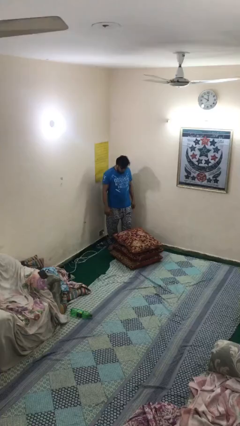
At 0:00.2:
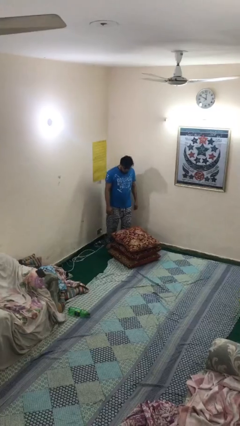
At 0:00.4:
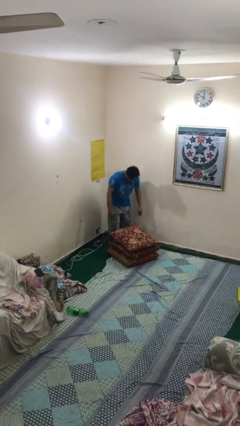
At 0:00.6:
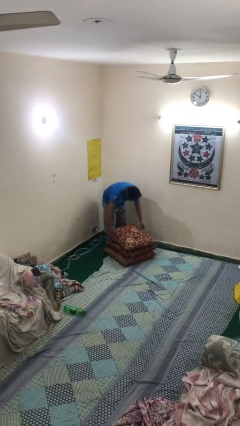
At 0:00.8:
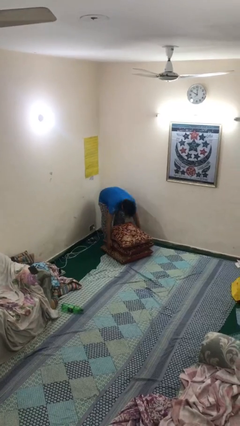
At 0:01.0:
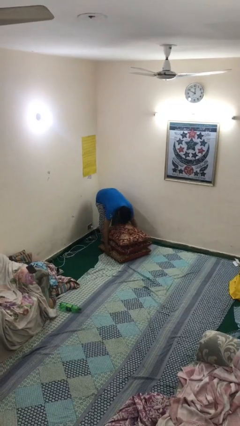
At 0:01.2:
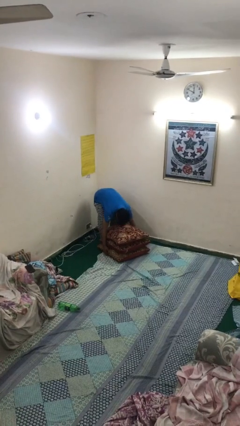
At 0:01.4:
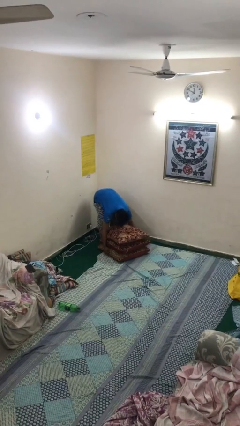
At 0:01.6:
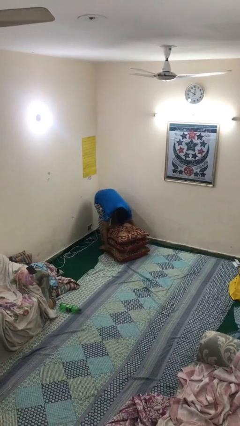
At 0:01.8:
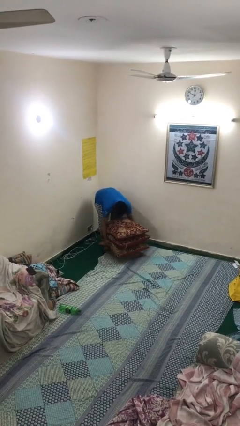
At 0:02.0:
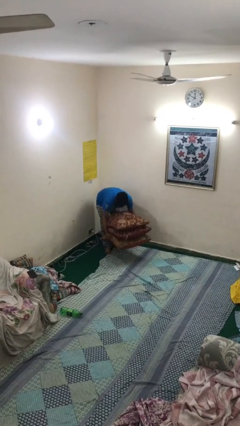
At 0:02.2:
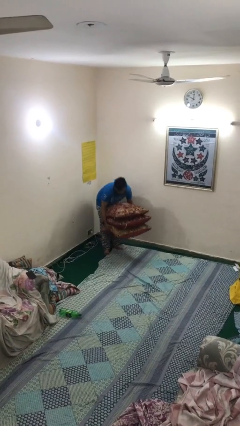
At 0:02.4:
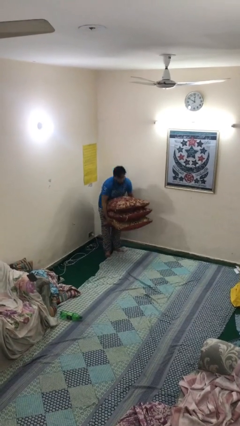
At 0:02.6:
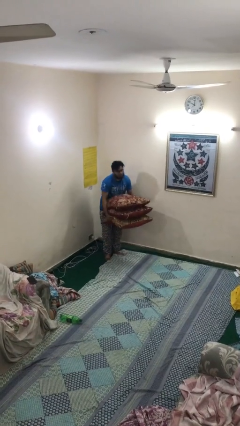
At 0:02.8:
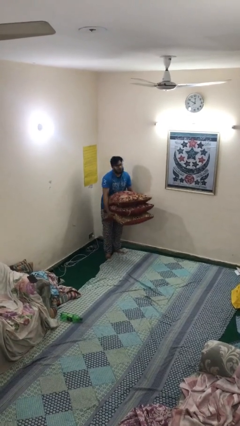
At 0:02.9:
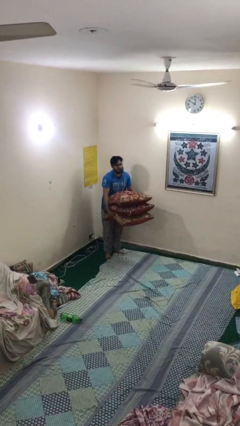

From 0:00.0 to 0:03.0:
person picks up object from floor

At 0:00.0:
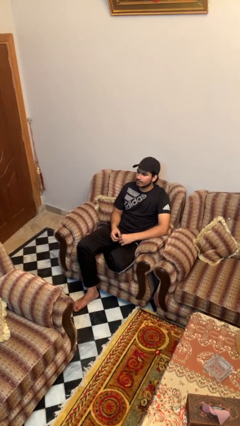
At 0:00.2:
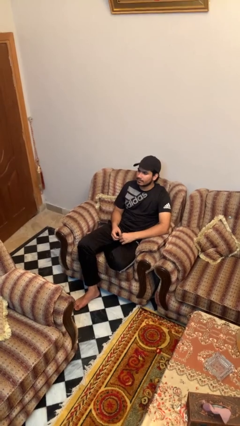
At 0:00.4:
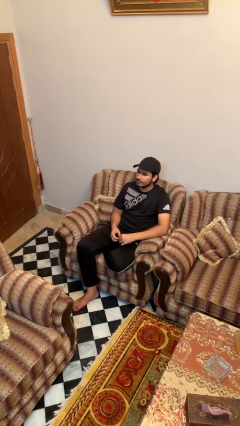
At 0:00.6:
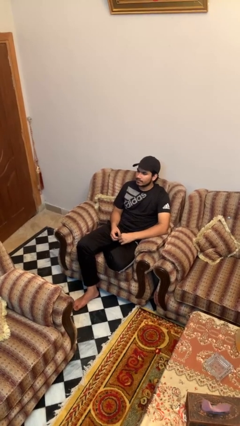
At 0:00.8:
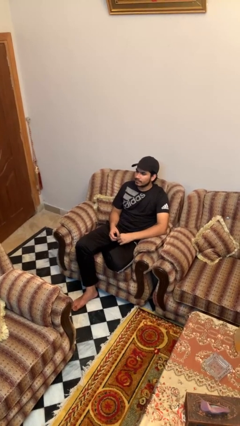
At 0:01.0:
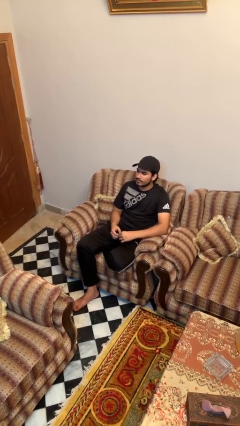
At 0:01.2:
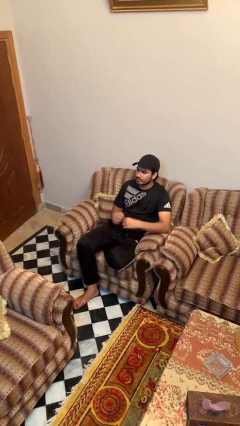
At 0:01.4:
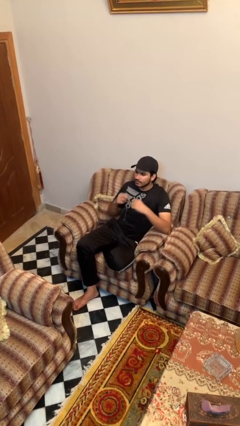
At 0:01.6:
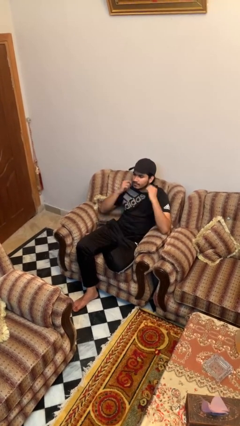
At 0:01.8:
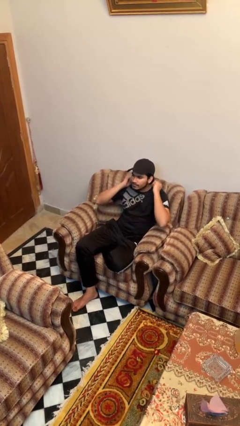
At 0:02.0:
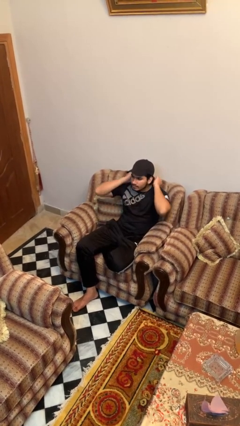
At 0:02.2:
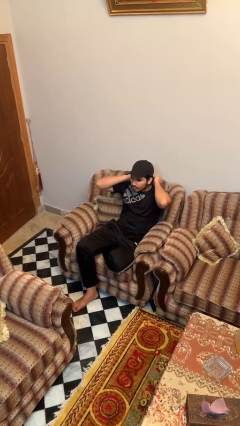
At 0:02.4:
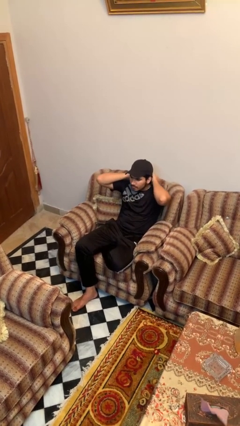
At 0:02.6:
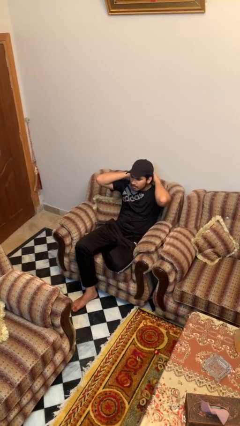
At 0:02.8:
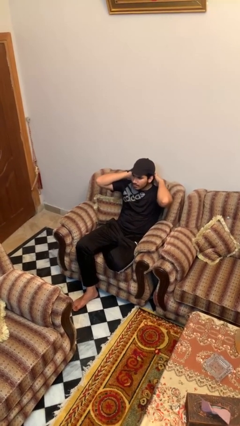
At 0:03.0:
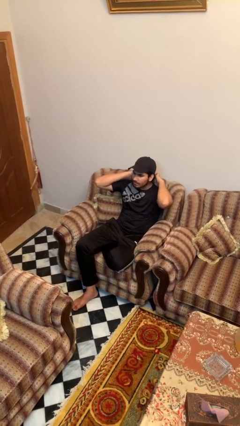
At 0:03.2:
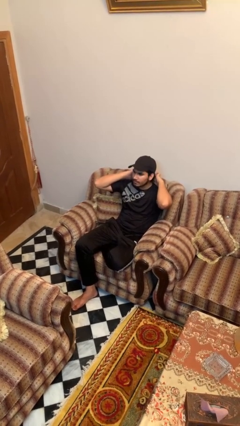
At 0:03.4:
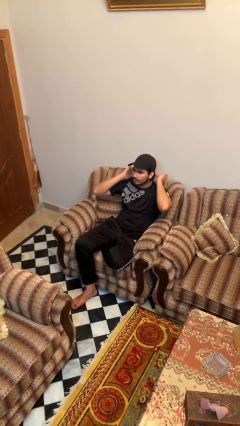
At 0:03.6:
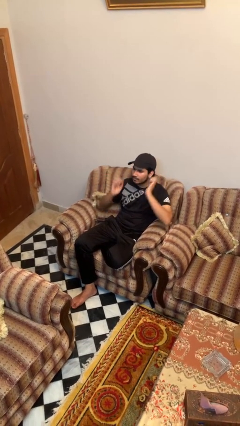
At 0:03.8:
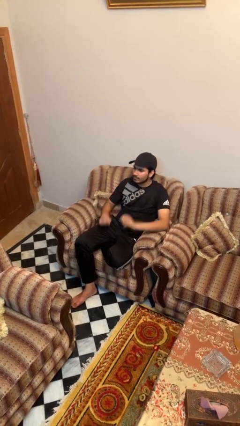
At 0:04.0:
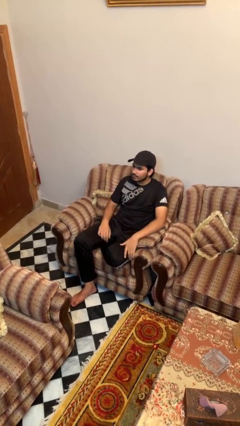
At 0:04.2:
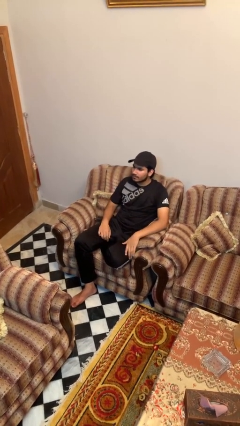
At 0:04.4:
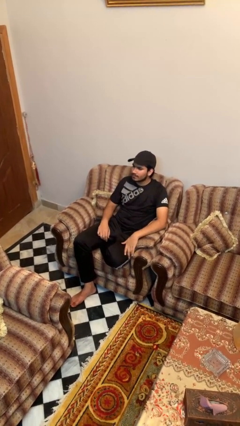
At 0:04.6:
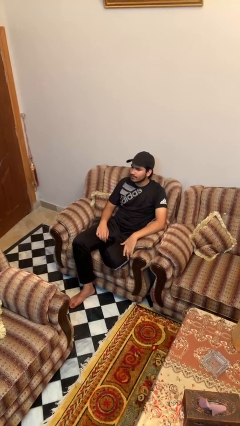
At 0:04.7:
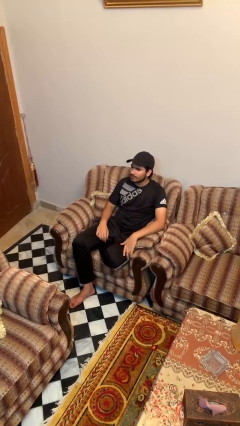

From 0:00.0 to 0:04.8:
person puts on necklace

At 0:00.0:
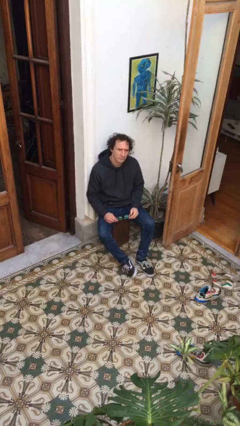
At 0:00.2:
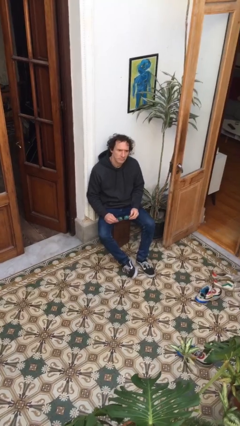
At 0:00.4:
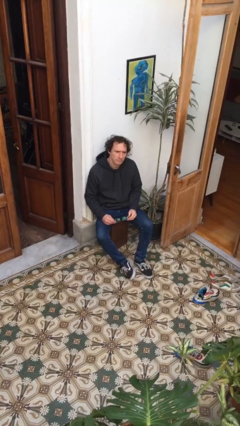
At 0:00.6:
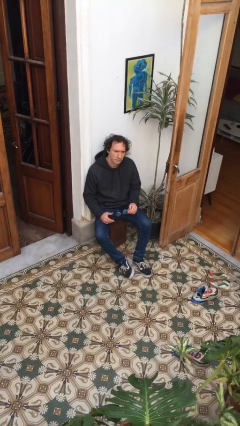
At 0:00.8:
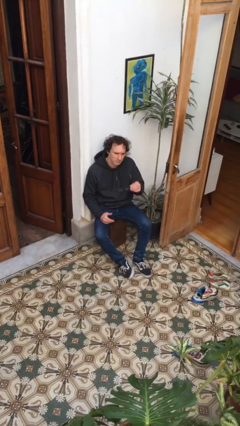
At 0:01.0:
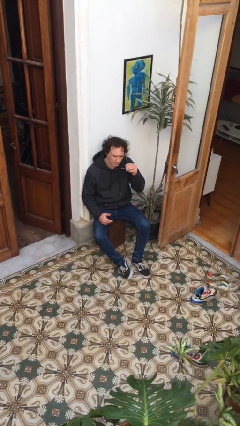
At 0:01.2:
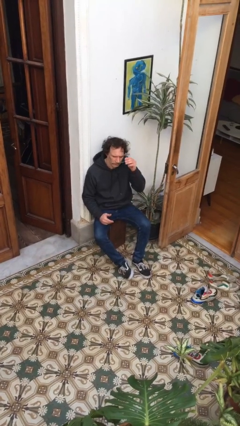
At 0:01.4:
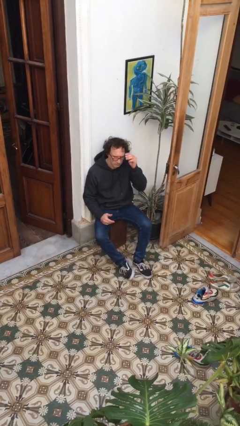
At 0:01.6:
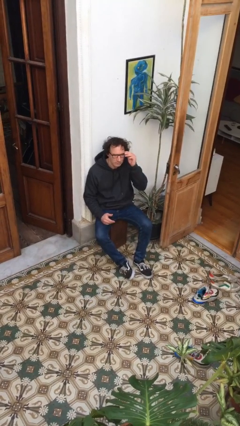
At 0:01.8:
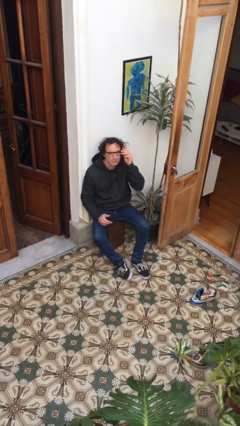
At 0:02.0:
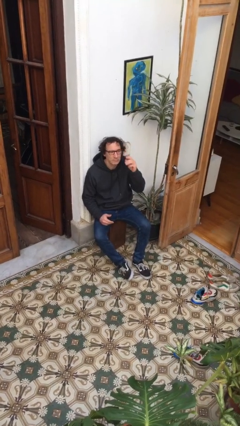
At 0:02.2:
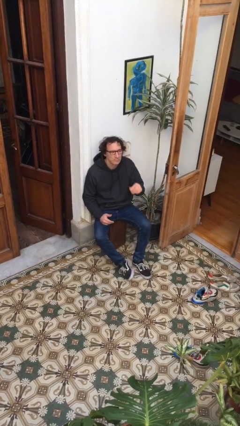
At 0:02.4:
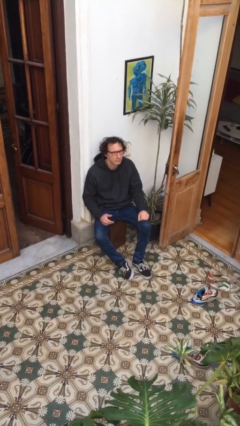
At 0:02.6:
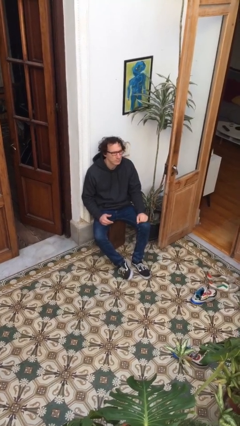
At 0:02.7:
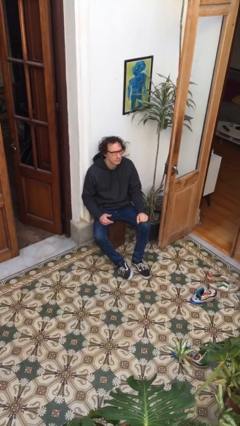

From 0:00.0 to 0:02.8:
person puts on glasses

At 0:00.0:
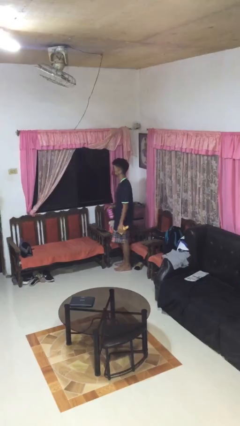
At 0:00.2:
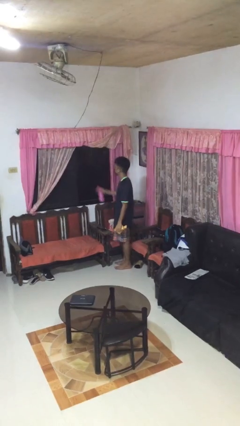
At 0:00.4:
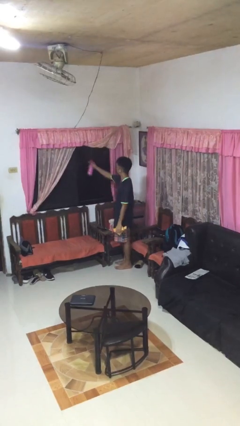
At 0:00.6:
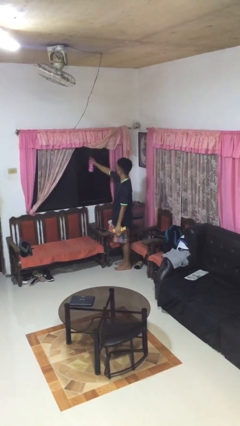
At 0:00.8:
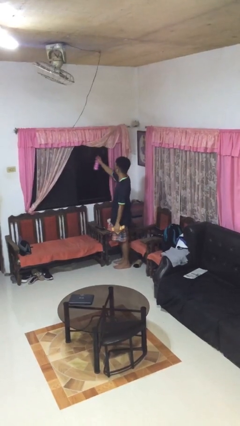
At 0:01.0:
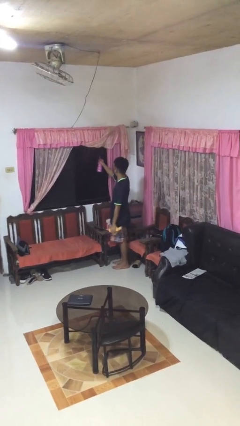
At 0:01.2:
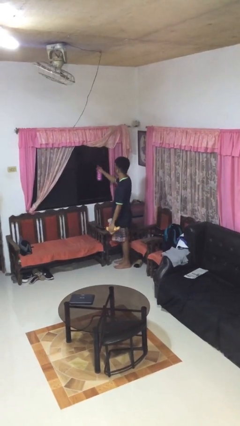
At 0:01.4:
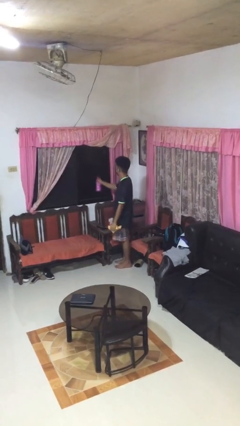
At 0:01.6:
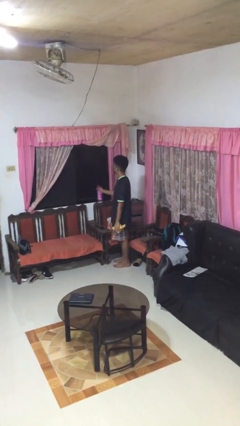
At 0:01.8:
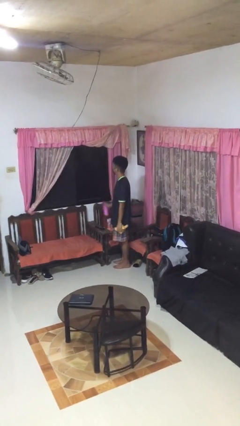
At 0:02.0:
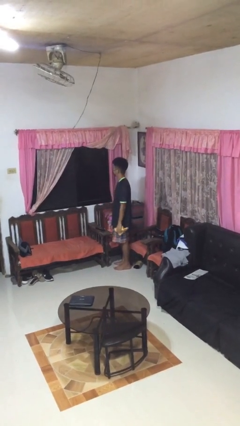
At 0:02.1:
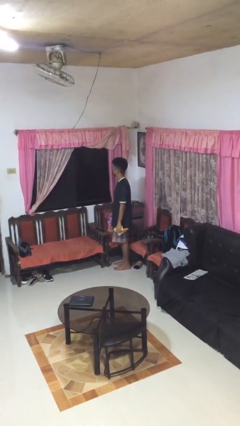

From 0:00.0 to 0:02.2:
person sprays from bottle

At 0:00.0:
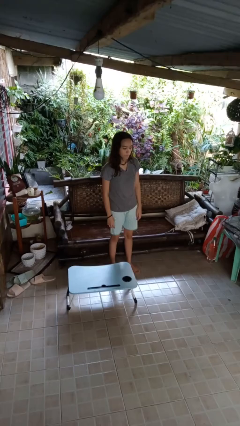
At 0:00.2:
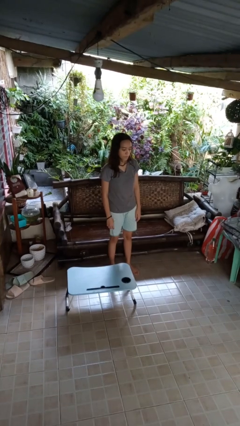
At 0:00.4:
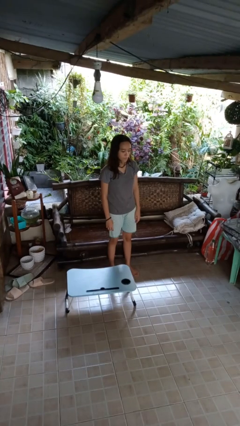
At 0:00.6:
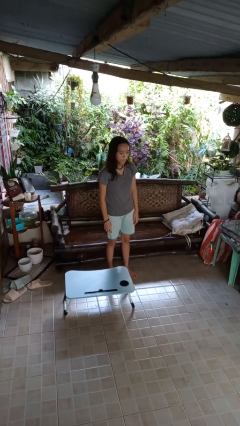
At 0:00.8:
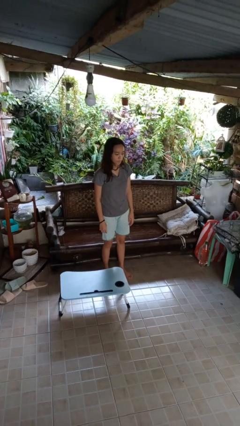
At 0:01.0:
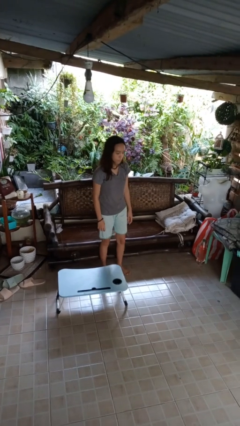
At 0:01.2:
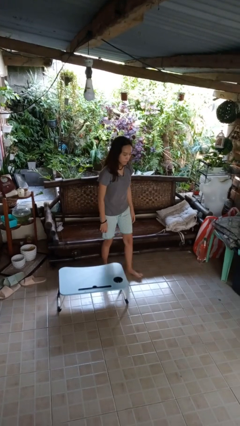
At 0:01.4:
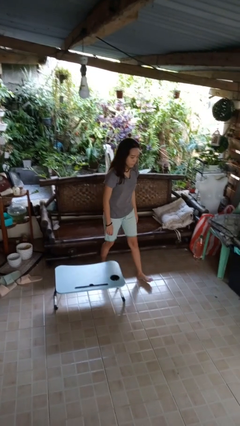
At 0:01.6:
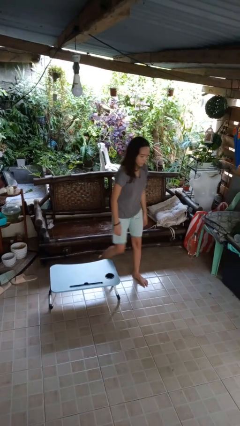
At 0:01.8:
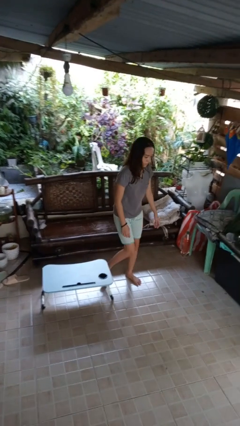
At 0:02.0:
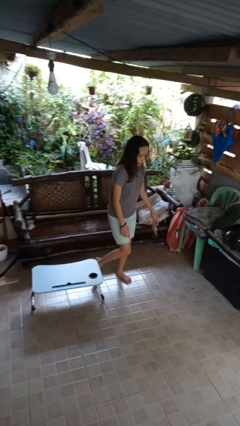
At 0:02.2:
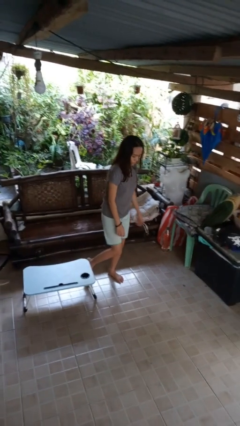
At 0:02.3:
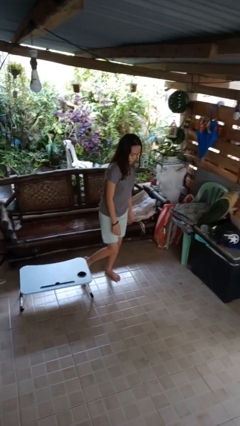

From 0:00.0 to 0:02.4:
person trips on object on floor

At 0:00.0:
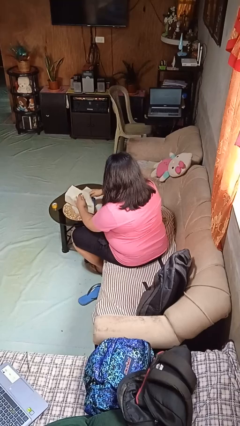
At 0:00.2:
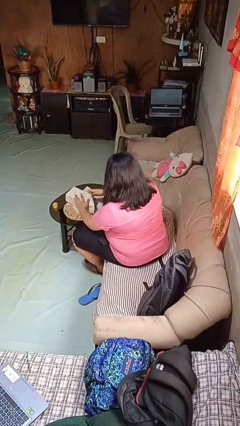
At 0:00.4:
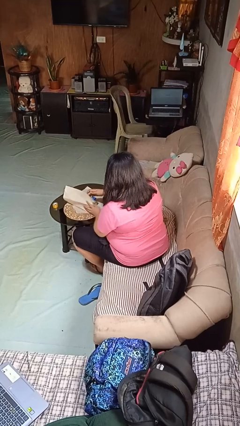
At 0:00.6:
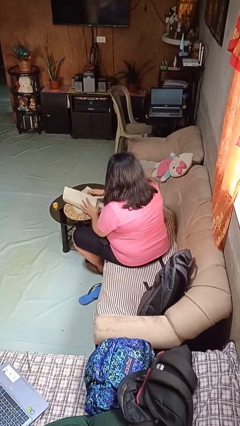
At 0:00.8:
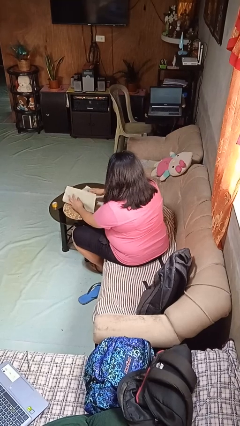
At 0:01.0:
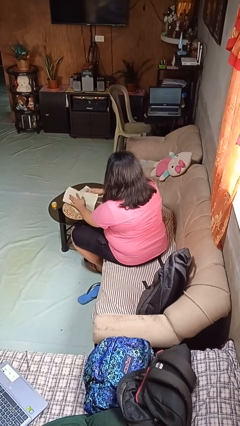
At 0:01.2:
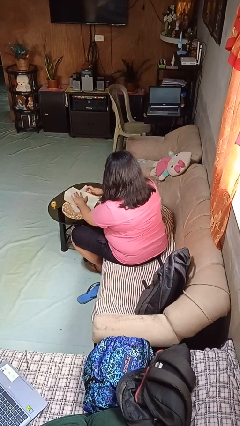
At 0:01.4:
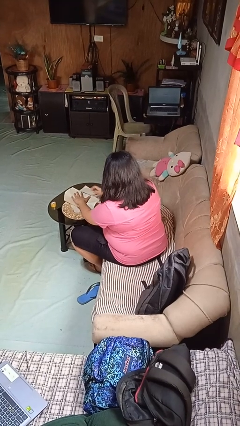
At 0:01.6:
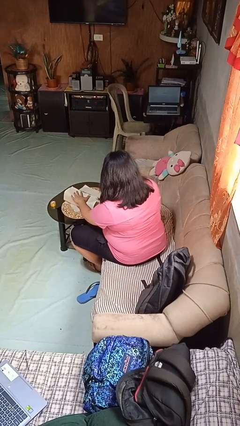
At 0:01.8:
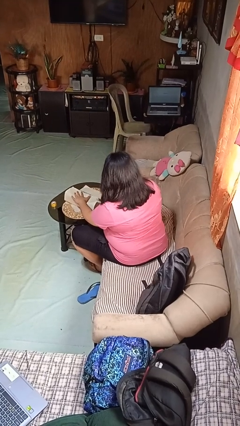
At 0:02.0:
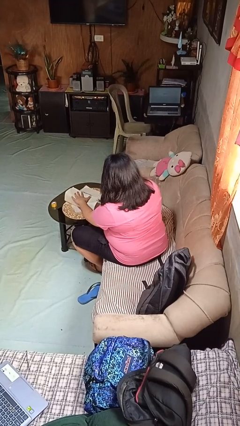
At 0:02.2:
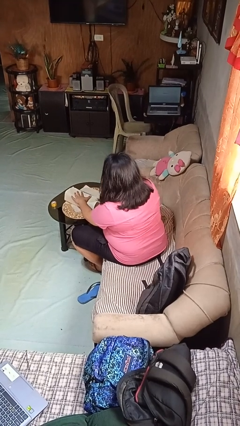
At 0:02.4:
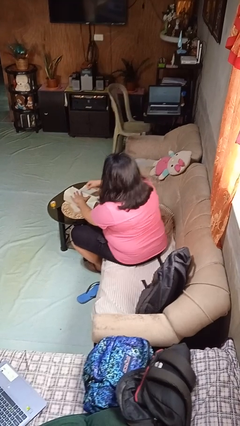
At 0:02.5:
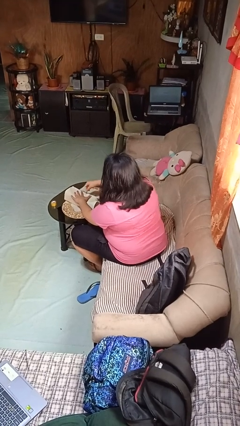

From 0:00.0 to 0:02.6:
person wraps box
